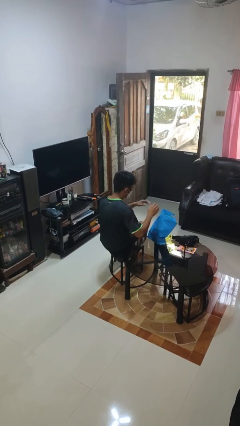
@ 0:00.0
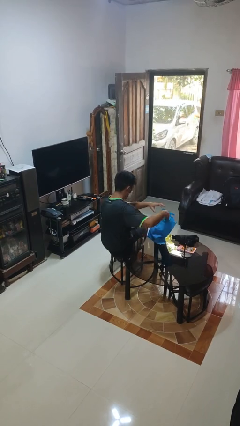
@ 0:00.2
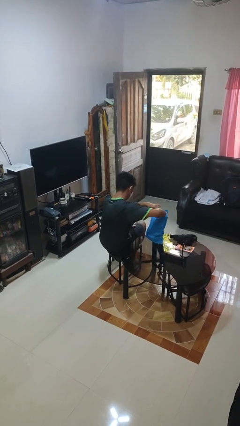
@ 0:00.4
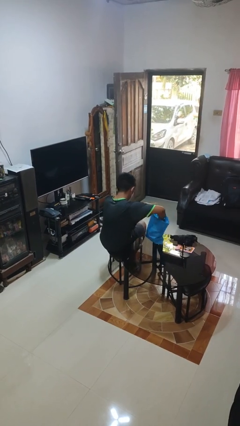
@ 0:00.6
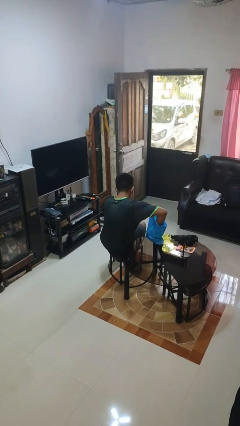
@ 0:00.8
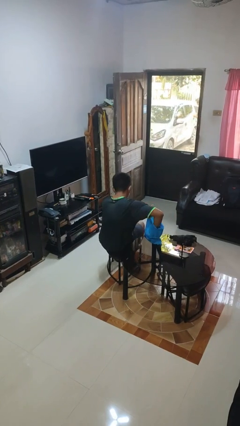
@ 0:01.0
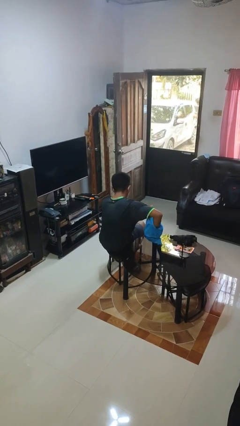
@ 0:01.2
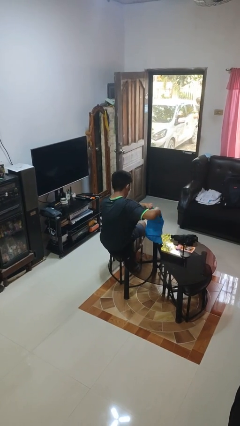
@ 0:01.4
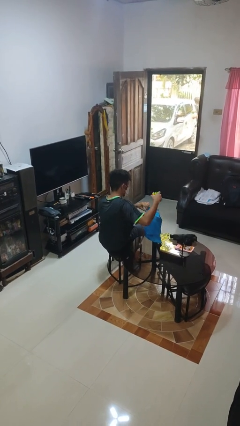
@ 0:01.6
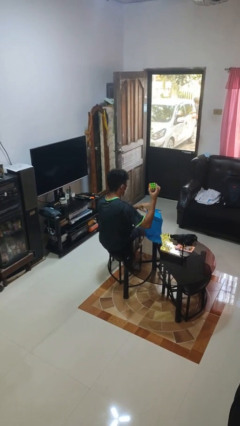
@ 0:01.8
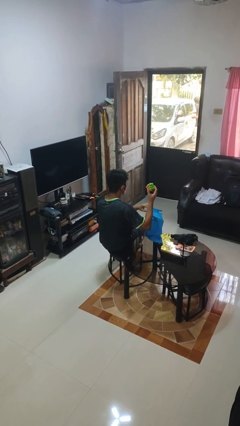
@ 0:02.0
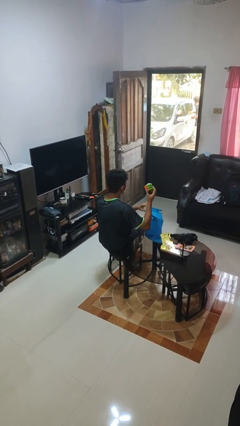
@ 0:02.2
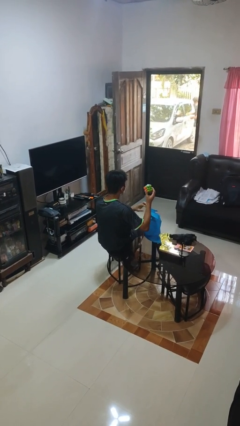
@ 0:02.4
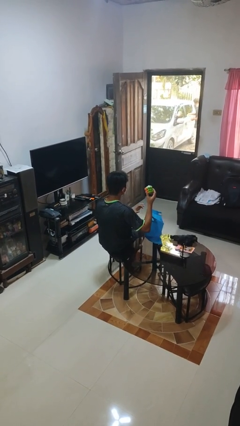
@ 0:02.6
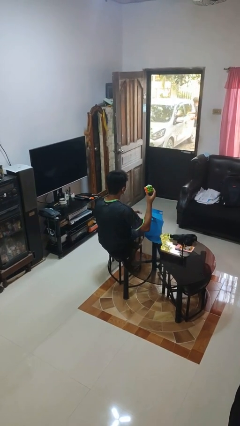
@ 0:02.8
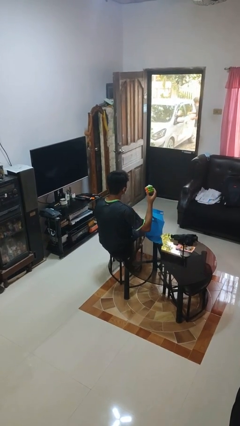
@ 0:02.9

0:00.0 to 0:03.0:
person takes object from bag

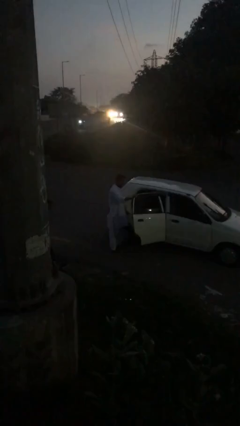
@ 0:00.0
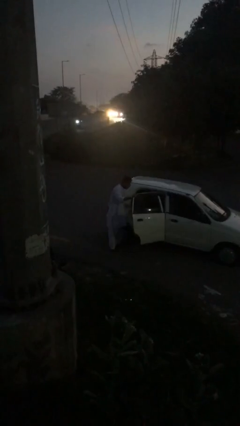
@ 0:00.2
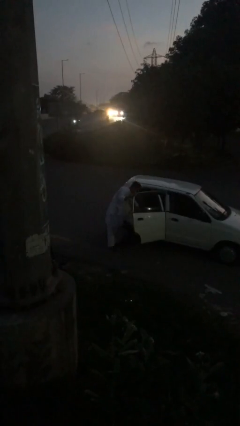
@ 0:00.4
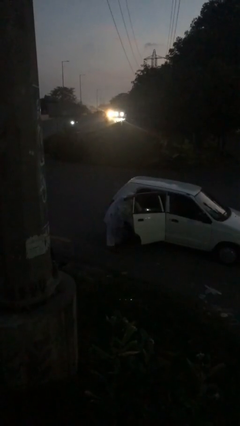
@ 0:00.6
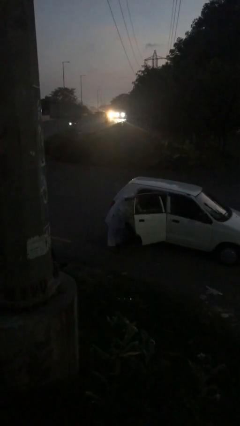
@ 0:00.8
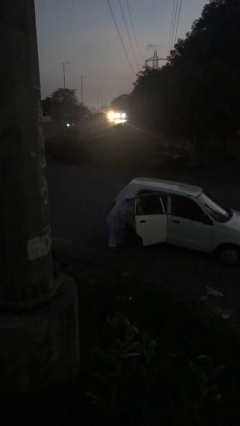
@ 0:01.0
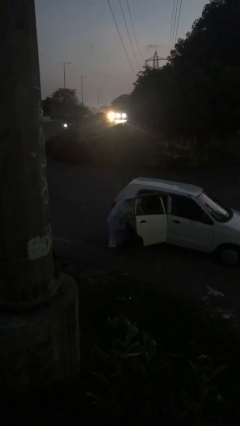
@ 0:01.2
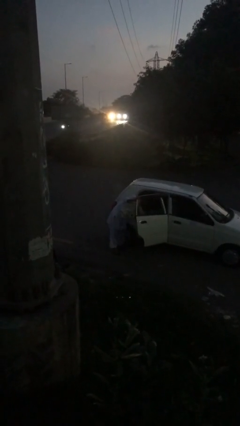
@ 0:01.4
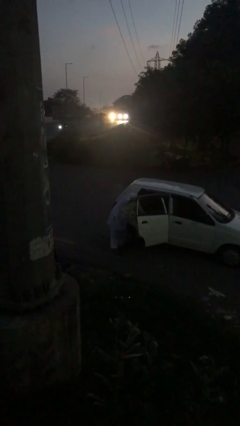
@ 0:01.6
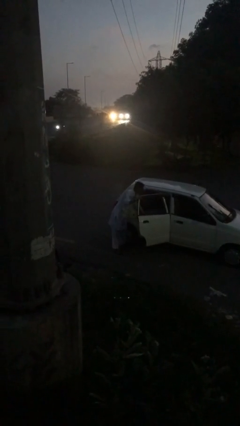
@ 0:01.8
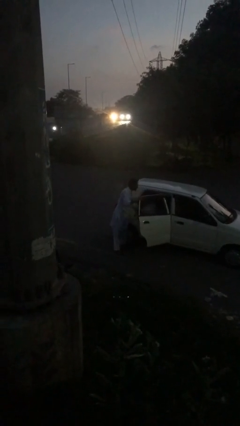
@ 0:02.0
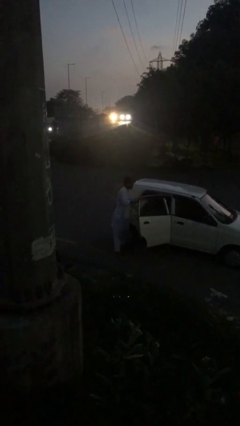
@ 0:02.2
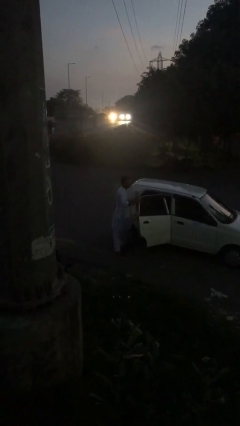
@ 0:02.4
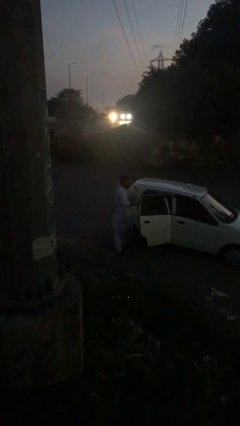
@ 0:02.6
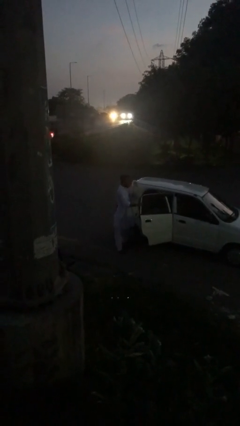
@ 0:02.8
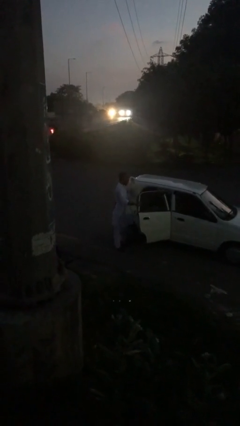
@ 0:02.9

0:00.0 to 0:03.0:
person unloads car

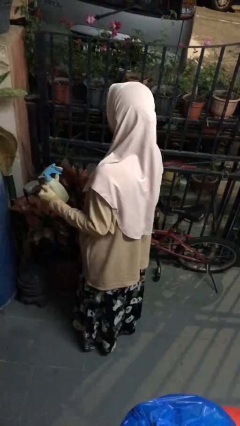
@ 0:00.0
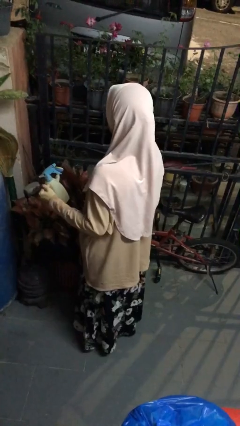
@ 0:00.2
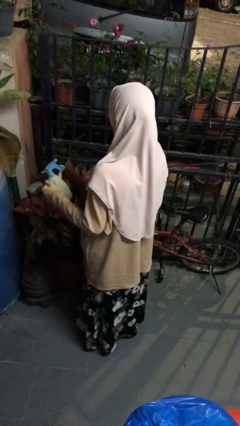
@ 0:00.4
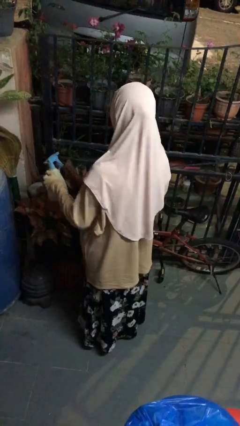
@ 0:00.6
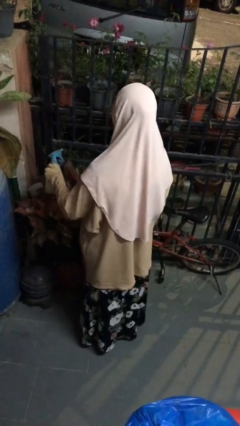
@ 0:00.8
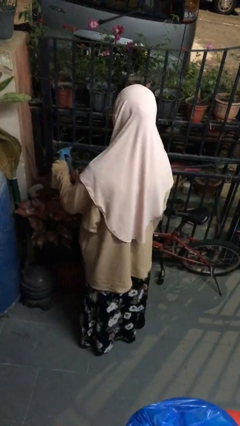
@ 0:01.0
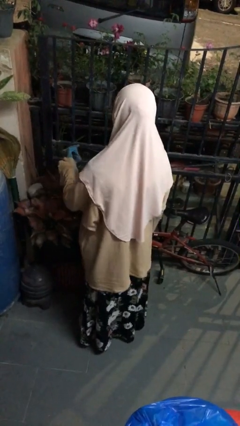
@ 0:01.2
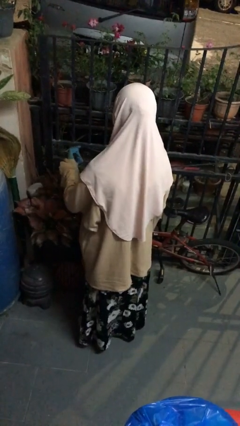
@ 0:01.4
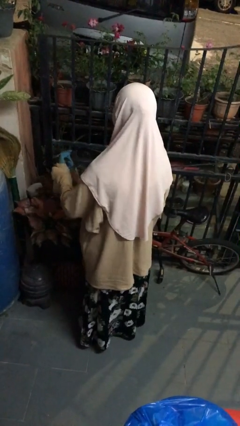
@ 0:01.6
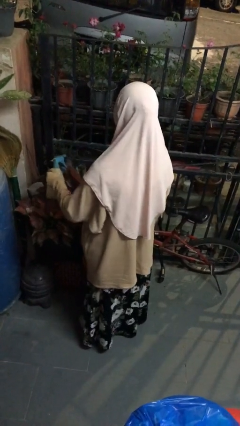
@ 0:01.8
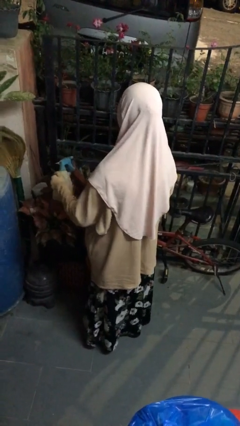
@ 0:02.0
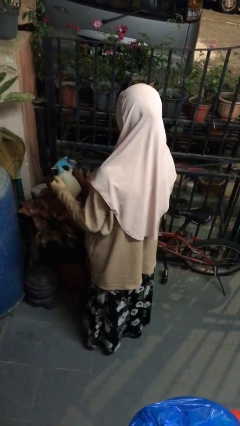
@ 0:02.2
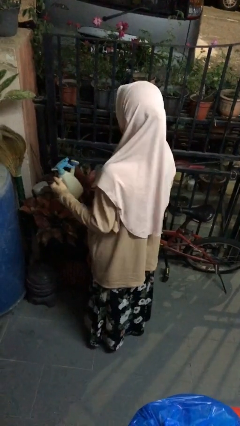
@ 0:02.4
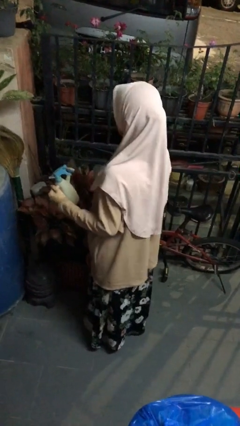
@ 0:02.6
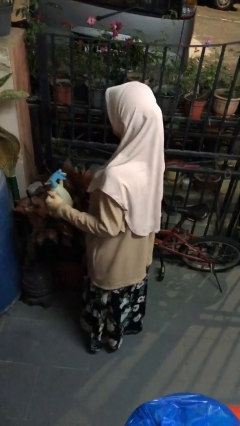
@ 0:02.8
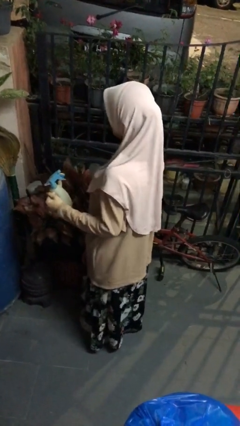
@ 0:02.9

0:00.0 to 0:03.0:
person waters houseplant

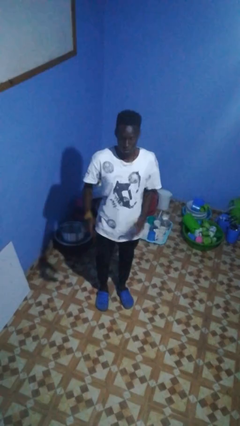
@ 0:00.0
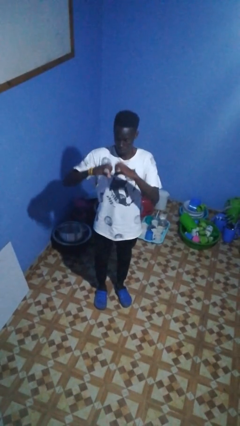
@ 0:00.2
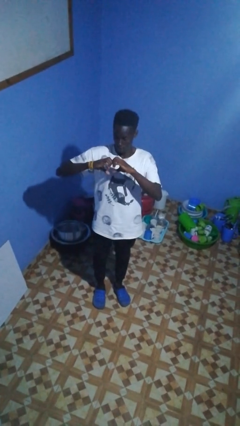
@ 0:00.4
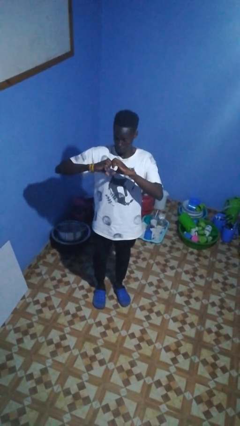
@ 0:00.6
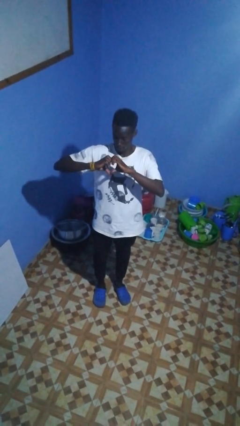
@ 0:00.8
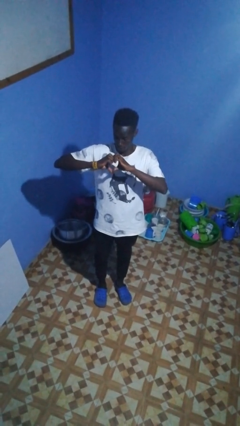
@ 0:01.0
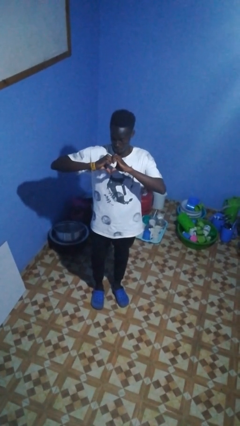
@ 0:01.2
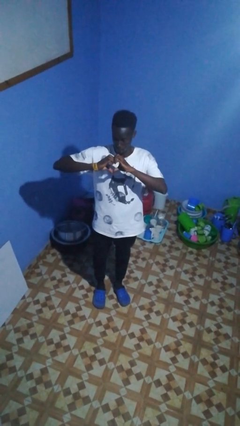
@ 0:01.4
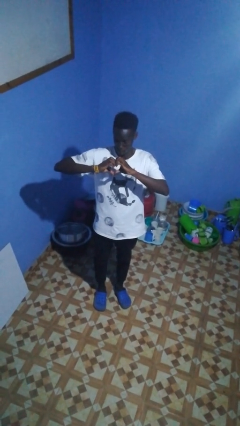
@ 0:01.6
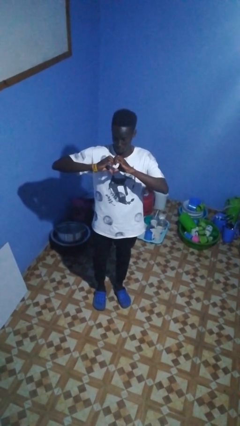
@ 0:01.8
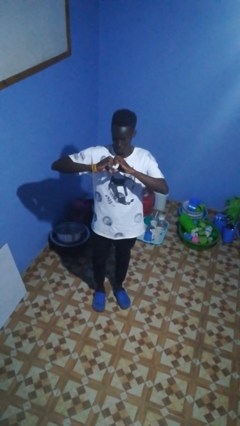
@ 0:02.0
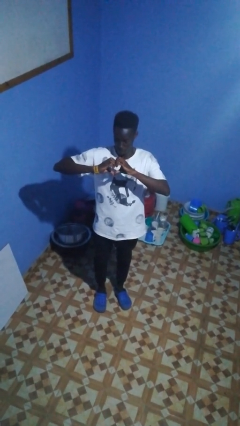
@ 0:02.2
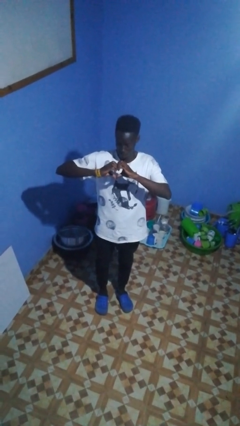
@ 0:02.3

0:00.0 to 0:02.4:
person gestures heart

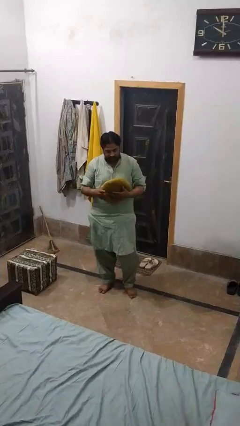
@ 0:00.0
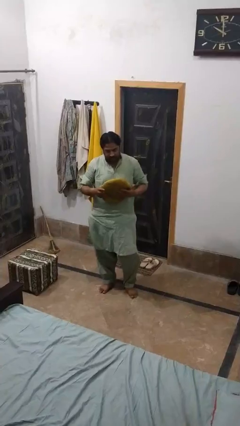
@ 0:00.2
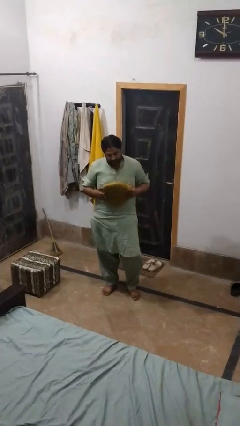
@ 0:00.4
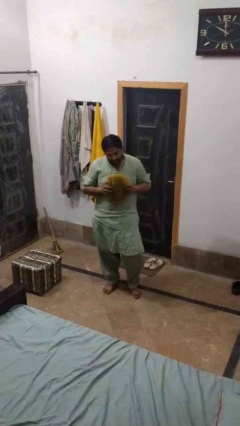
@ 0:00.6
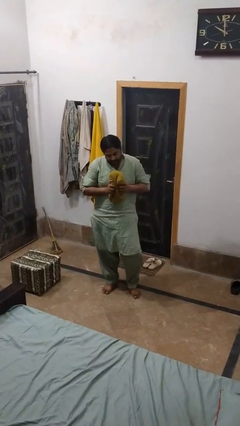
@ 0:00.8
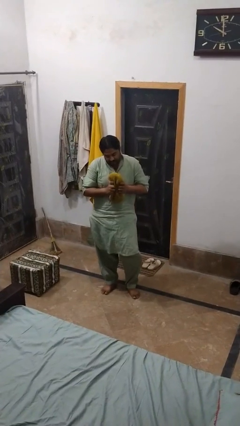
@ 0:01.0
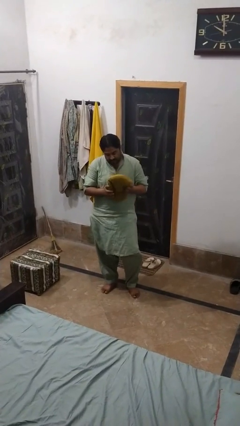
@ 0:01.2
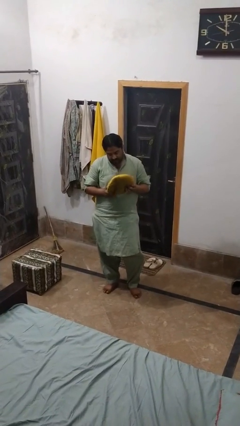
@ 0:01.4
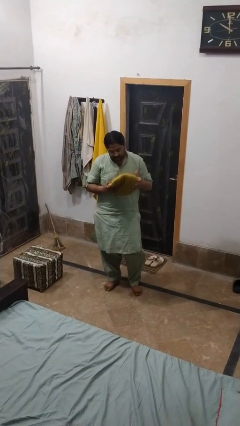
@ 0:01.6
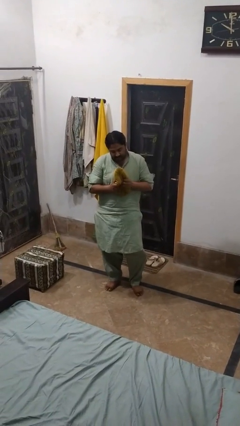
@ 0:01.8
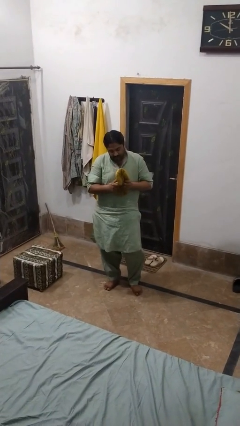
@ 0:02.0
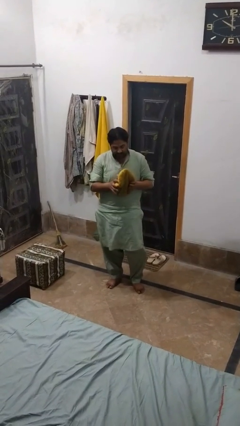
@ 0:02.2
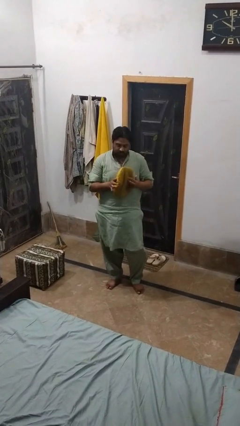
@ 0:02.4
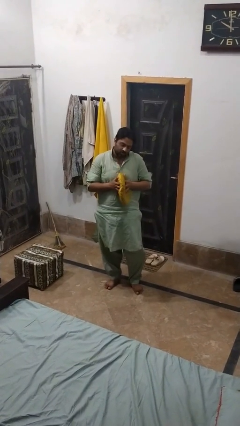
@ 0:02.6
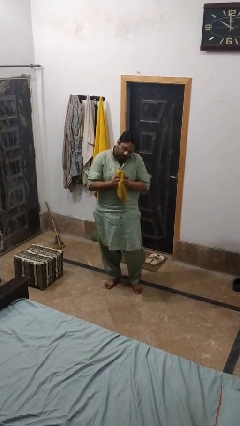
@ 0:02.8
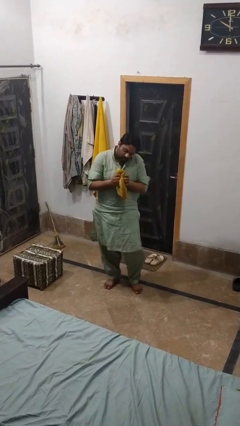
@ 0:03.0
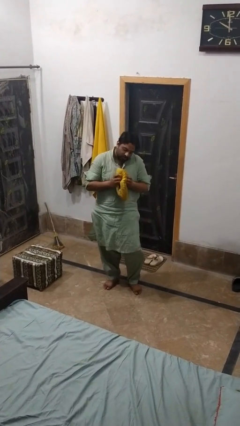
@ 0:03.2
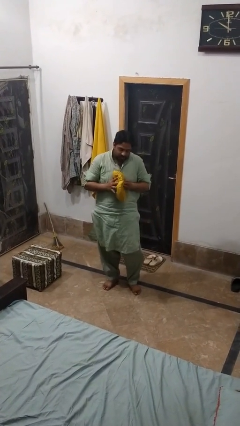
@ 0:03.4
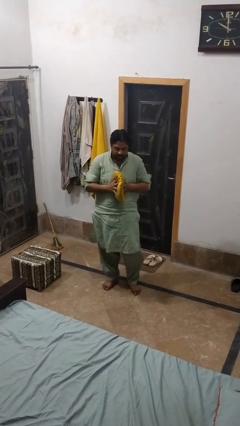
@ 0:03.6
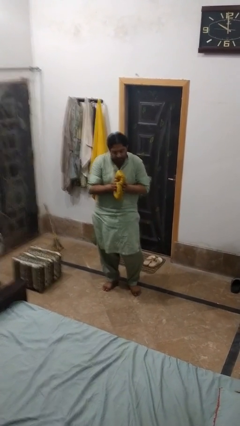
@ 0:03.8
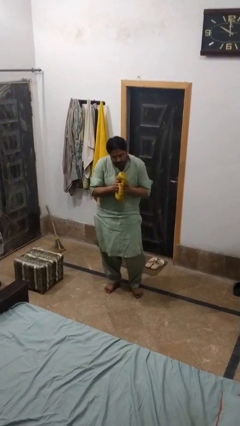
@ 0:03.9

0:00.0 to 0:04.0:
person squeezes object

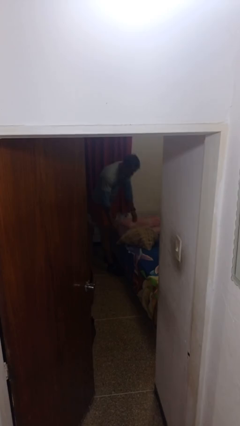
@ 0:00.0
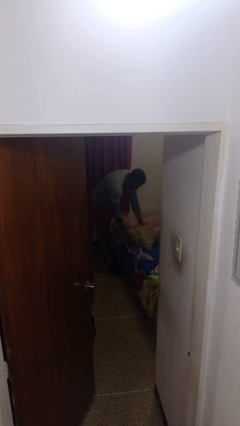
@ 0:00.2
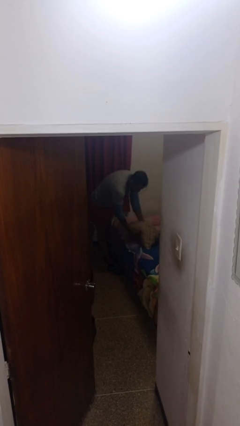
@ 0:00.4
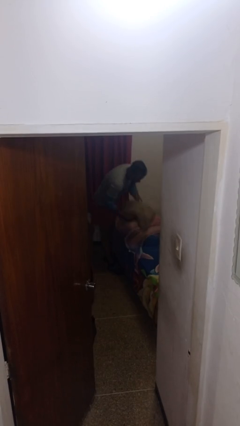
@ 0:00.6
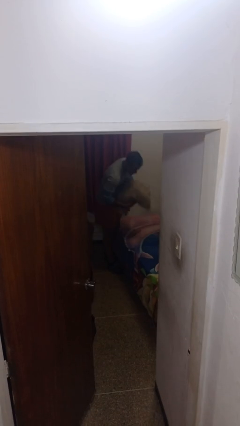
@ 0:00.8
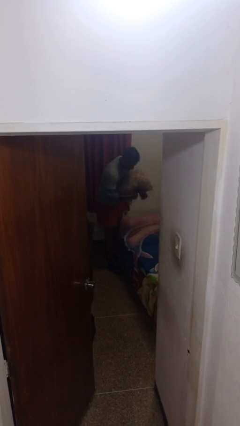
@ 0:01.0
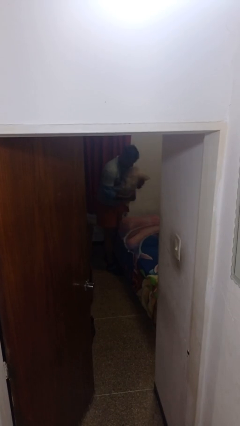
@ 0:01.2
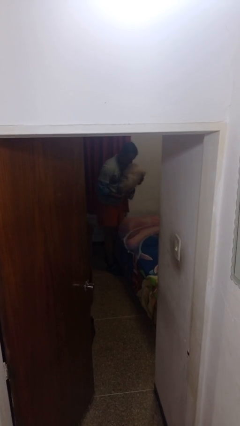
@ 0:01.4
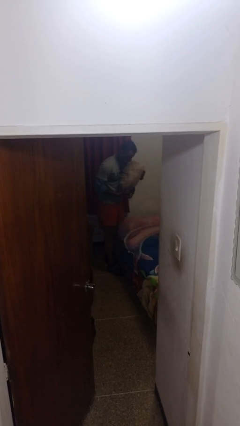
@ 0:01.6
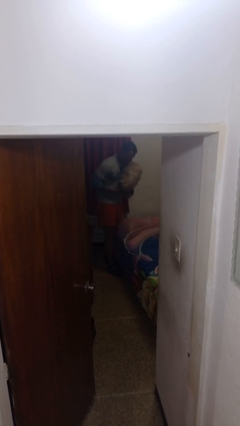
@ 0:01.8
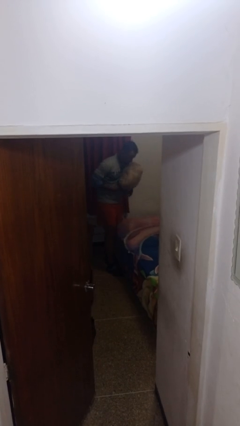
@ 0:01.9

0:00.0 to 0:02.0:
person picks up object from bed
